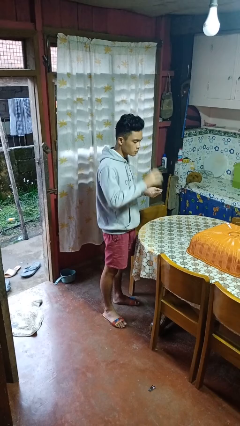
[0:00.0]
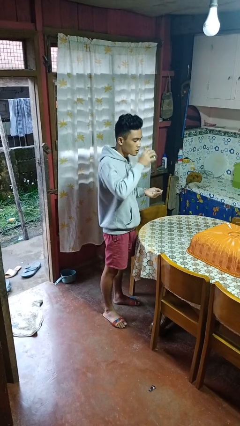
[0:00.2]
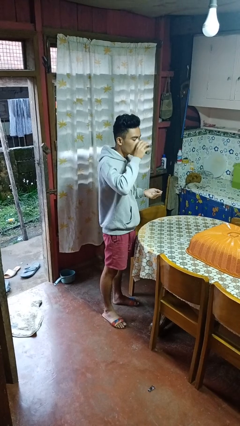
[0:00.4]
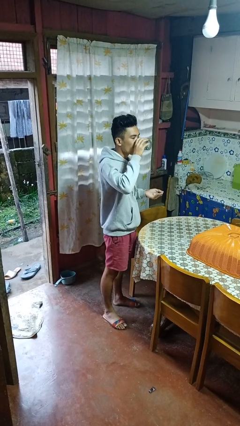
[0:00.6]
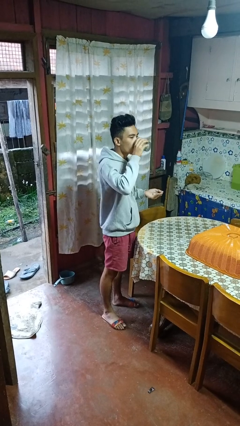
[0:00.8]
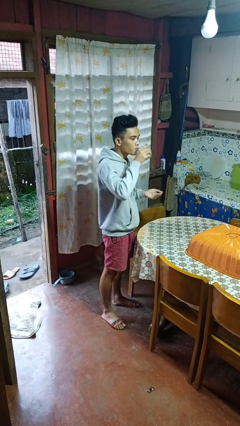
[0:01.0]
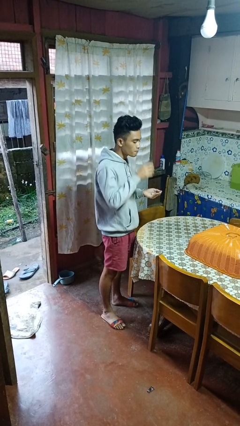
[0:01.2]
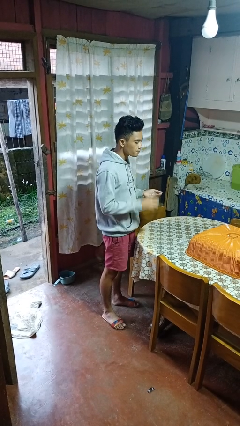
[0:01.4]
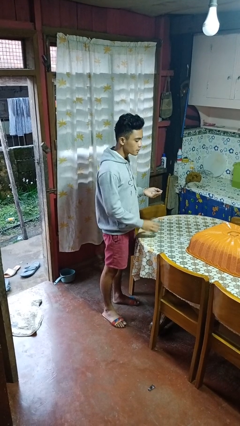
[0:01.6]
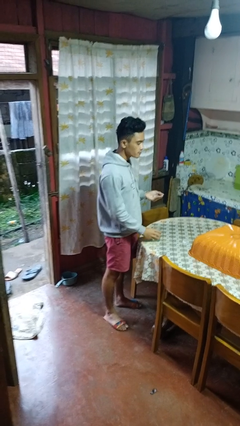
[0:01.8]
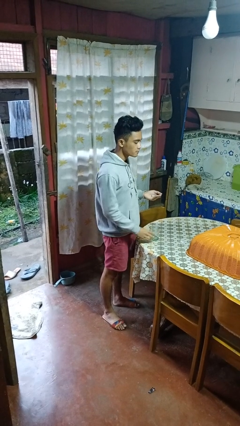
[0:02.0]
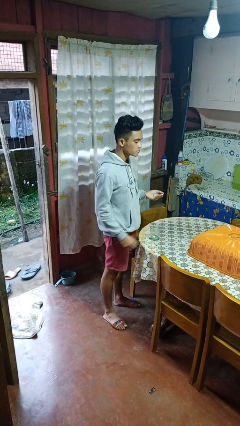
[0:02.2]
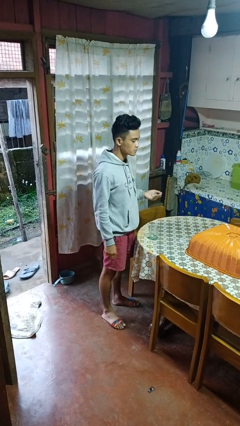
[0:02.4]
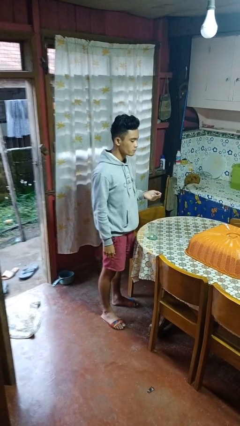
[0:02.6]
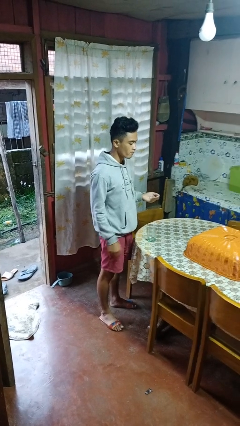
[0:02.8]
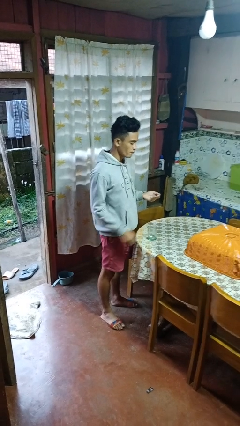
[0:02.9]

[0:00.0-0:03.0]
person drinks from cup

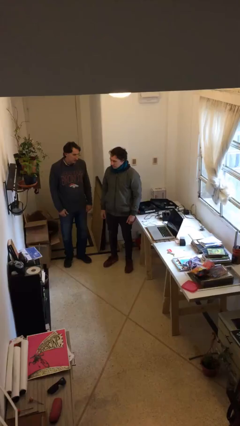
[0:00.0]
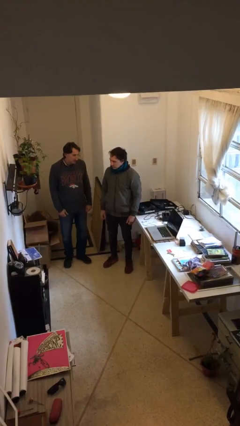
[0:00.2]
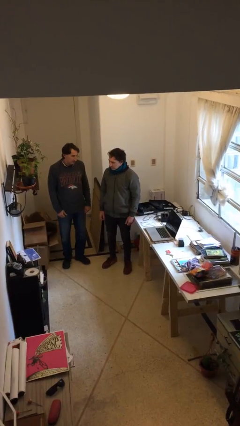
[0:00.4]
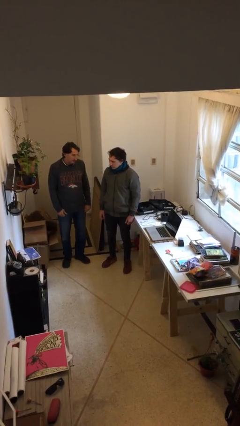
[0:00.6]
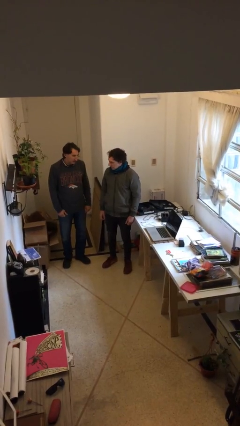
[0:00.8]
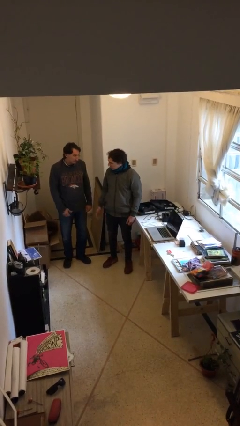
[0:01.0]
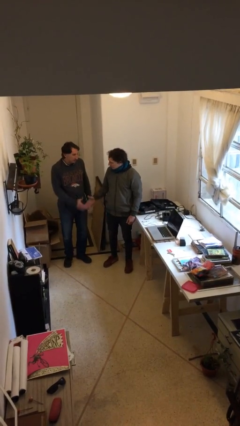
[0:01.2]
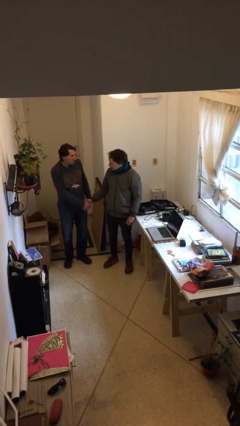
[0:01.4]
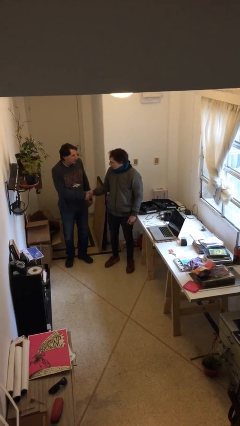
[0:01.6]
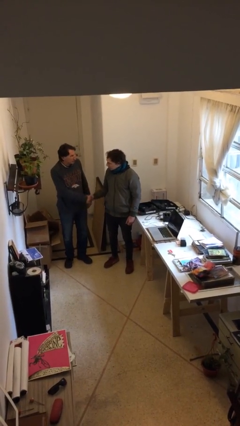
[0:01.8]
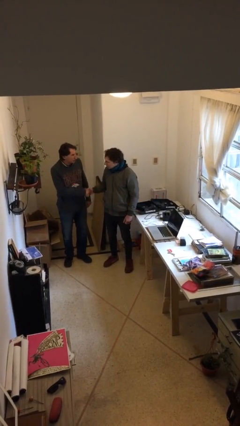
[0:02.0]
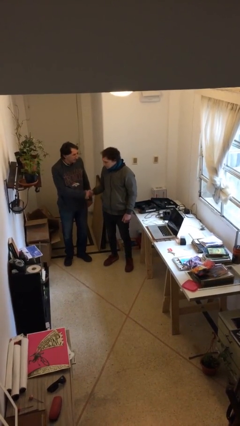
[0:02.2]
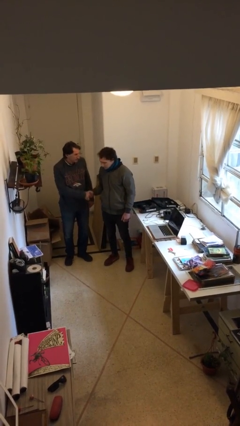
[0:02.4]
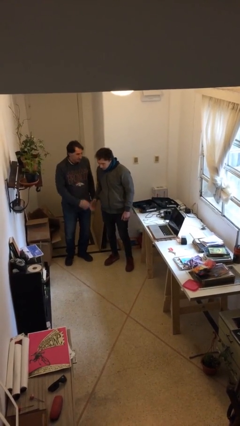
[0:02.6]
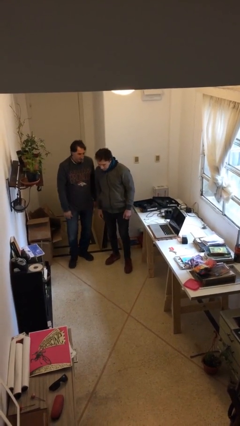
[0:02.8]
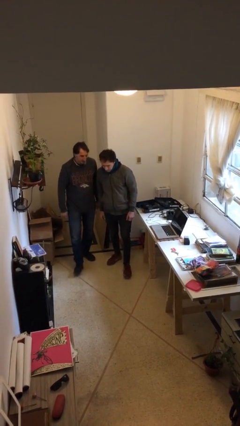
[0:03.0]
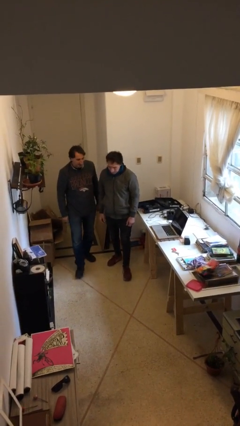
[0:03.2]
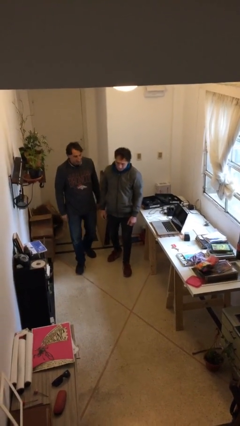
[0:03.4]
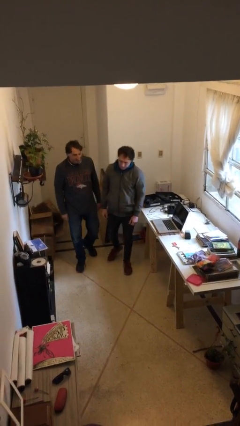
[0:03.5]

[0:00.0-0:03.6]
person shakes hand

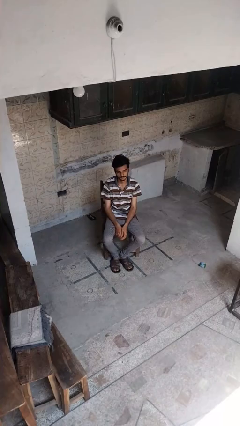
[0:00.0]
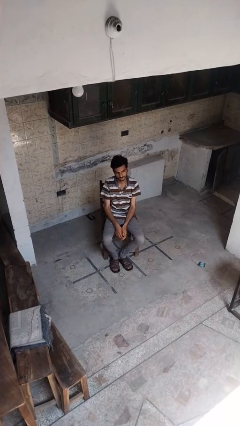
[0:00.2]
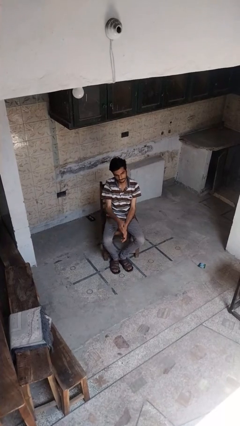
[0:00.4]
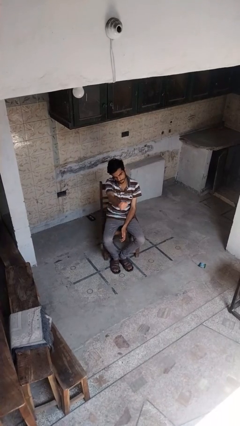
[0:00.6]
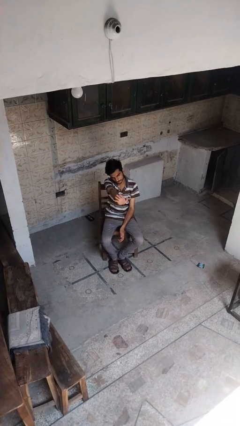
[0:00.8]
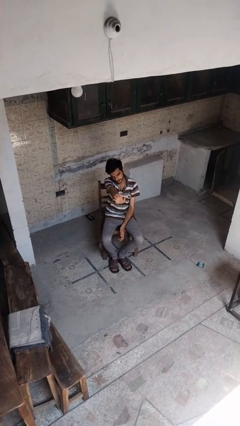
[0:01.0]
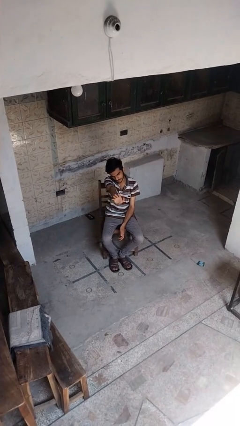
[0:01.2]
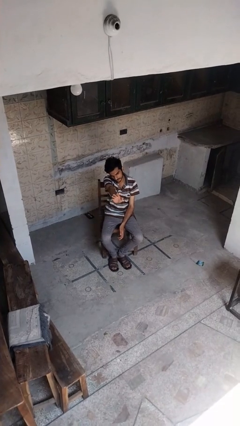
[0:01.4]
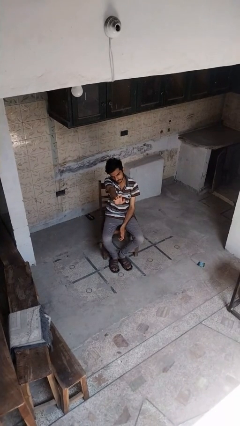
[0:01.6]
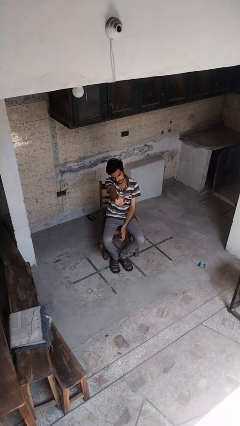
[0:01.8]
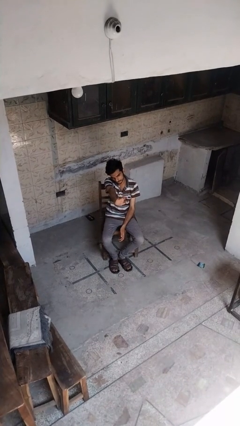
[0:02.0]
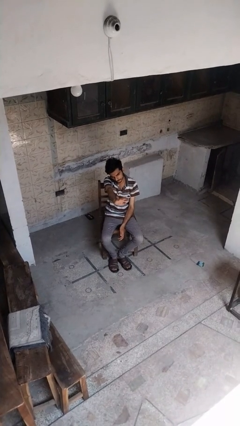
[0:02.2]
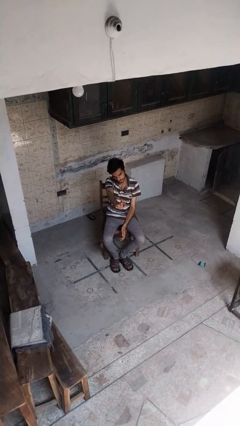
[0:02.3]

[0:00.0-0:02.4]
person waves at person

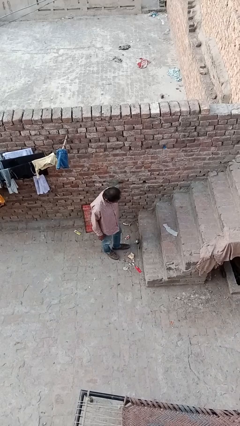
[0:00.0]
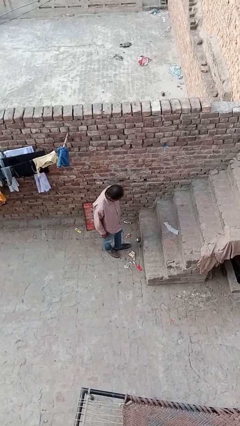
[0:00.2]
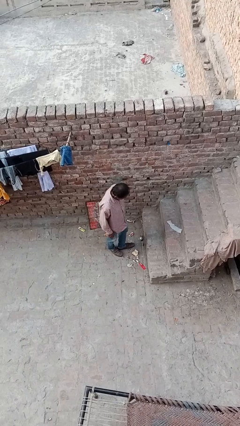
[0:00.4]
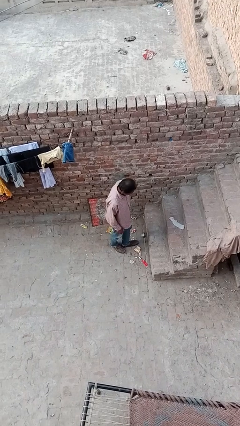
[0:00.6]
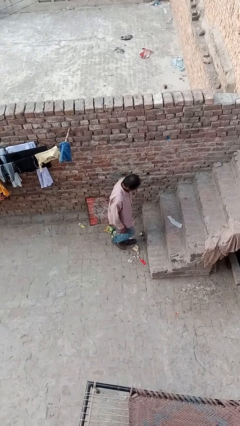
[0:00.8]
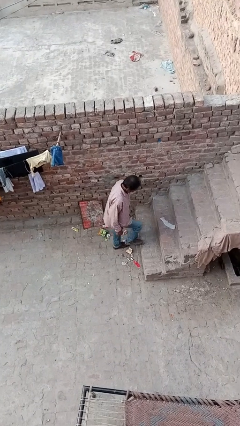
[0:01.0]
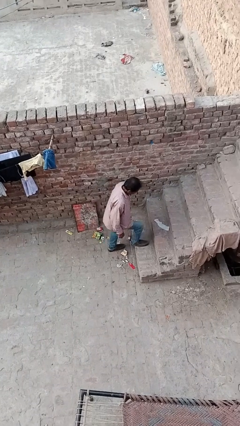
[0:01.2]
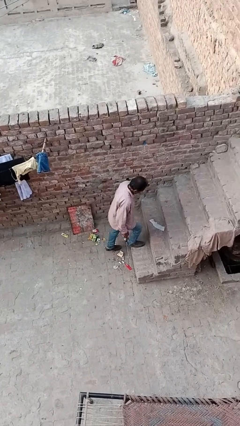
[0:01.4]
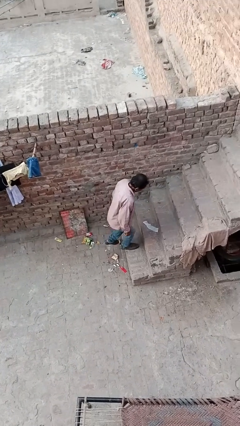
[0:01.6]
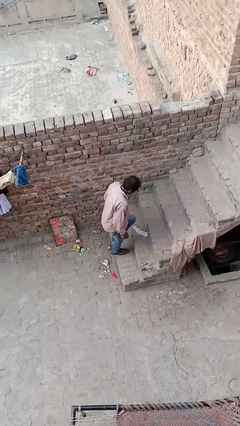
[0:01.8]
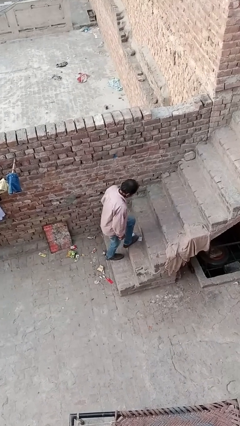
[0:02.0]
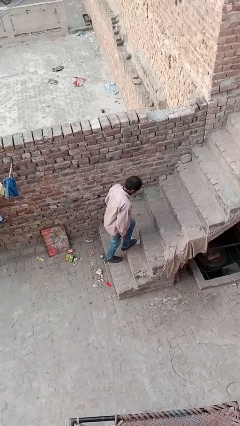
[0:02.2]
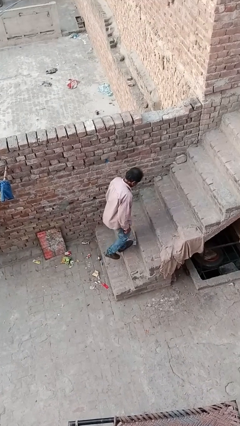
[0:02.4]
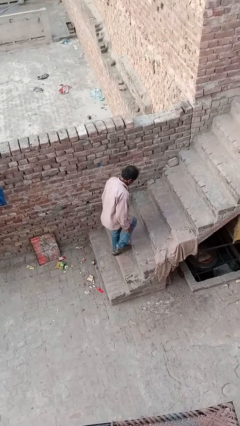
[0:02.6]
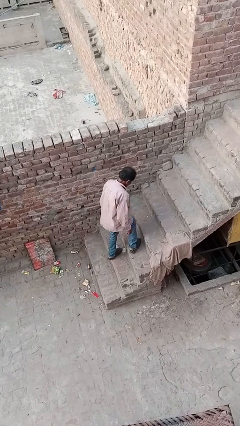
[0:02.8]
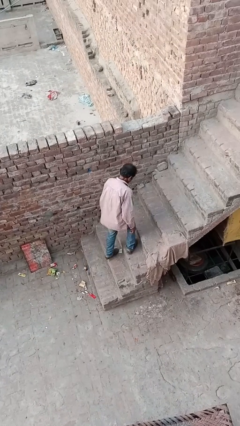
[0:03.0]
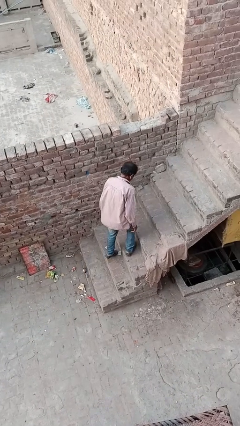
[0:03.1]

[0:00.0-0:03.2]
person climbs up stairs

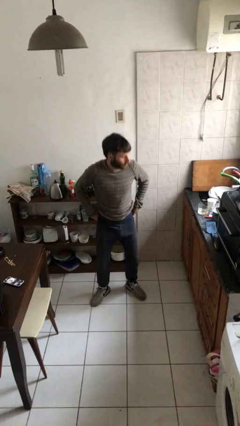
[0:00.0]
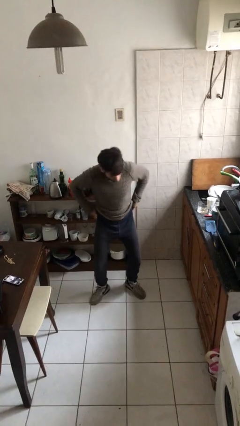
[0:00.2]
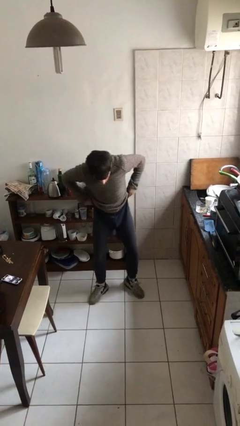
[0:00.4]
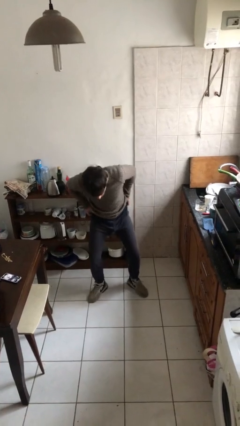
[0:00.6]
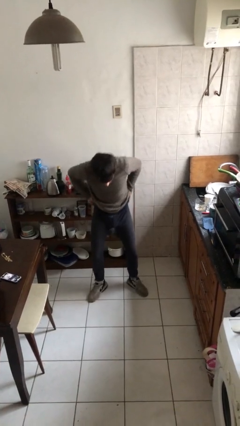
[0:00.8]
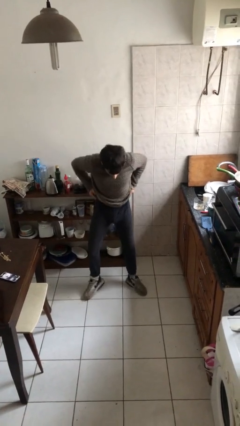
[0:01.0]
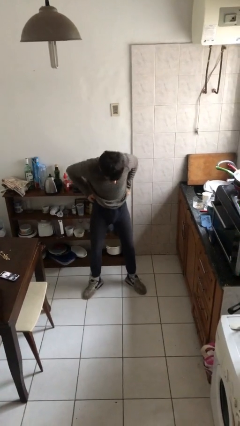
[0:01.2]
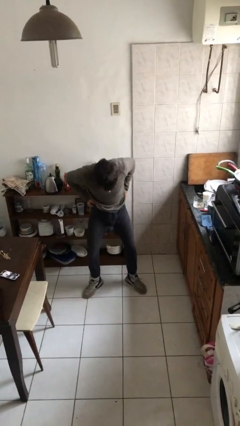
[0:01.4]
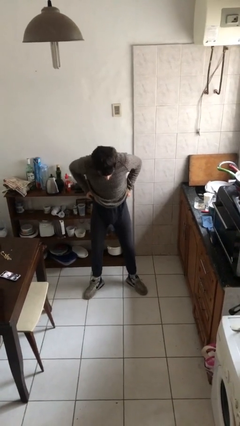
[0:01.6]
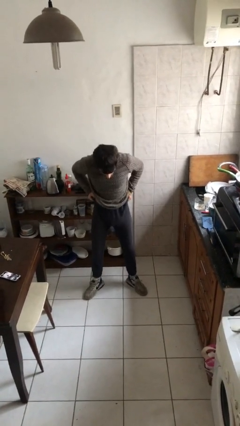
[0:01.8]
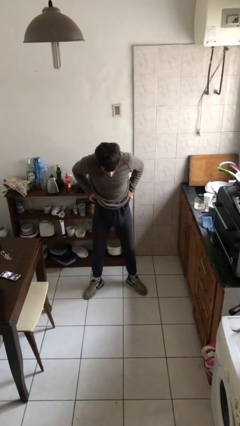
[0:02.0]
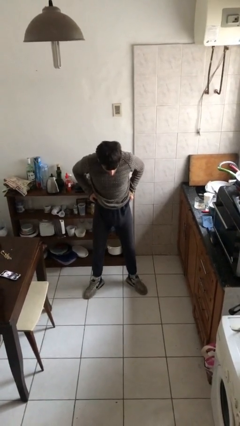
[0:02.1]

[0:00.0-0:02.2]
person hikes up pants

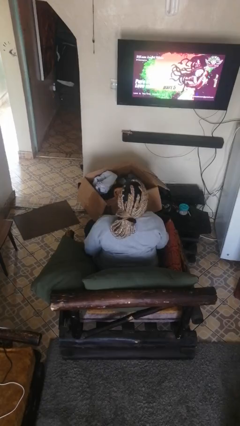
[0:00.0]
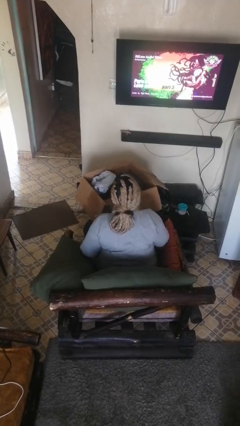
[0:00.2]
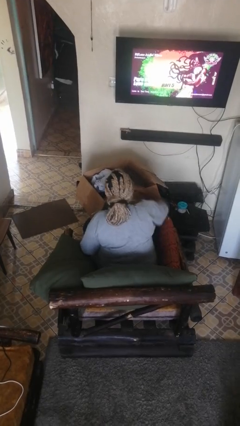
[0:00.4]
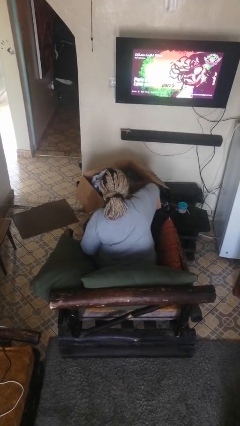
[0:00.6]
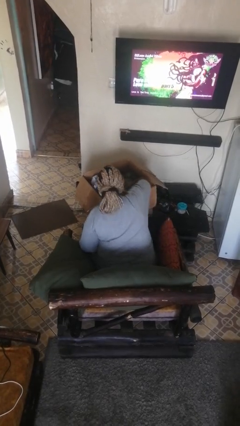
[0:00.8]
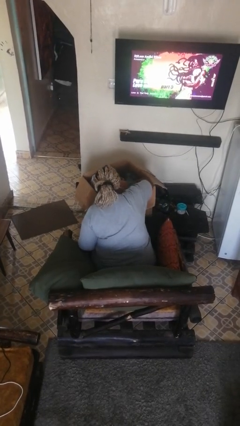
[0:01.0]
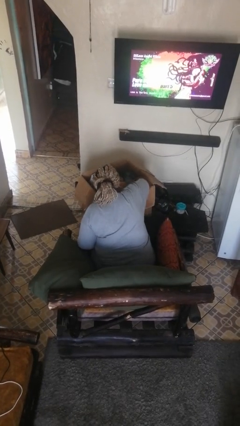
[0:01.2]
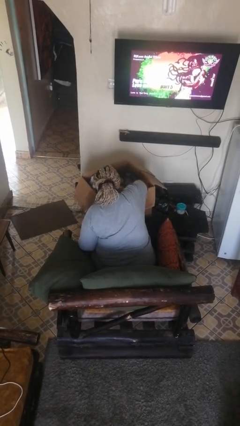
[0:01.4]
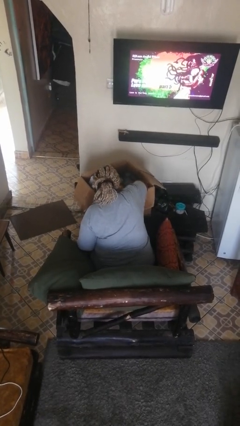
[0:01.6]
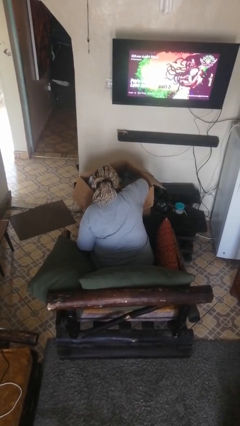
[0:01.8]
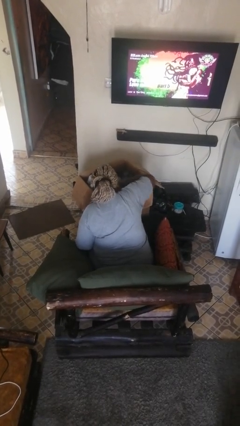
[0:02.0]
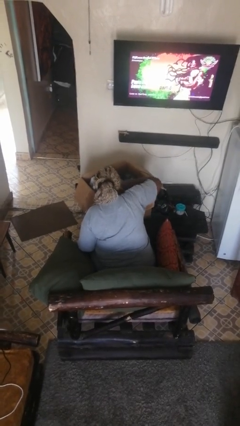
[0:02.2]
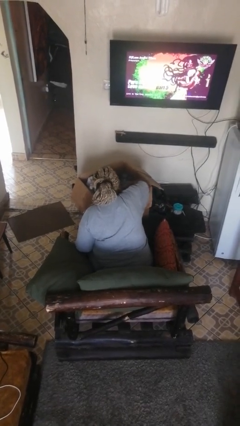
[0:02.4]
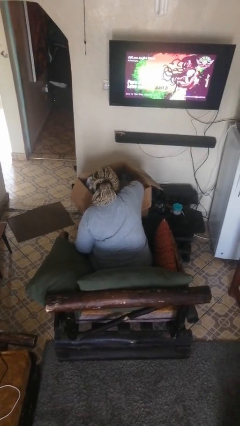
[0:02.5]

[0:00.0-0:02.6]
person searches in box

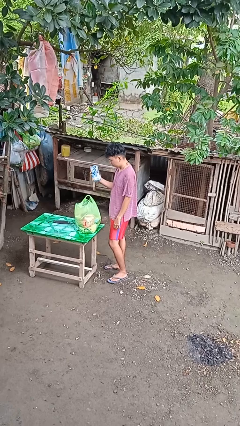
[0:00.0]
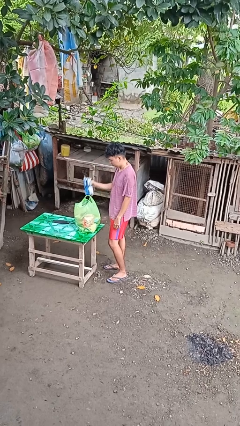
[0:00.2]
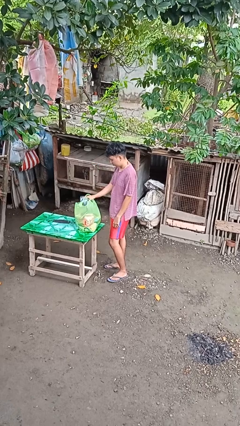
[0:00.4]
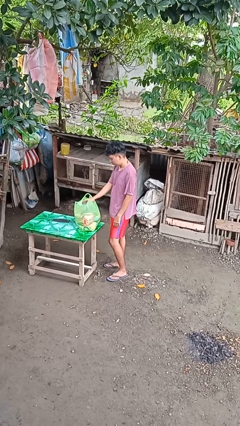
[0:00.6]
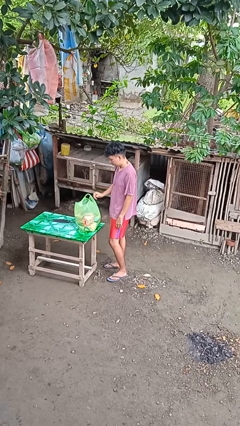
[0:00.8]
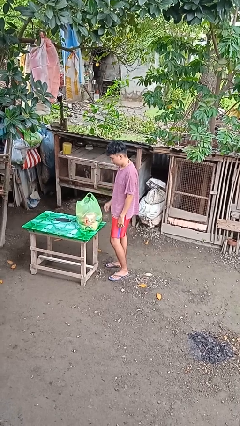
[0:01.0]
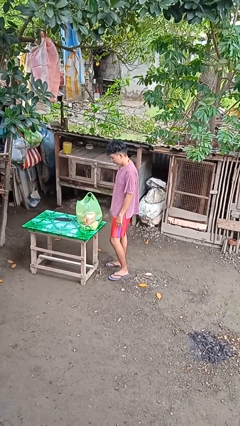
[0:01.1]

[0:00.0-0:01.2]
person puts object into bag
